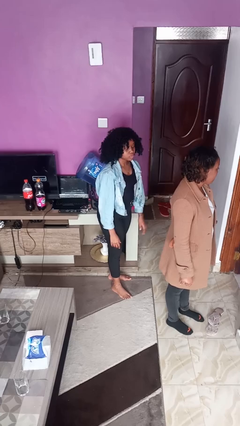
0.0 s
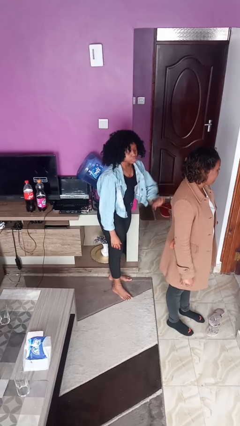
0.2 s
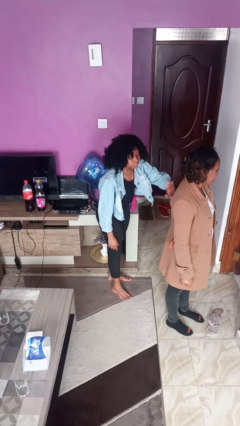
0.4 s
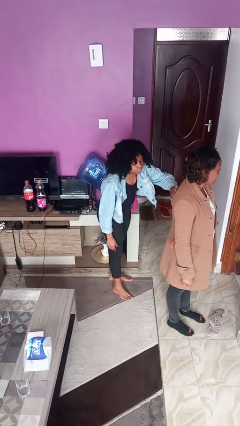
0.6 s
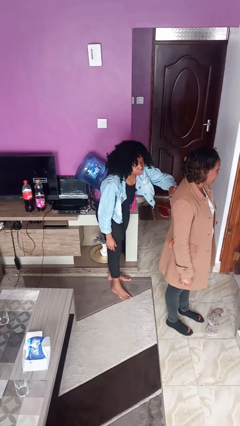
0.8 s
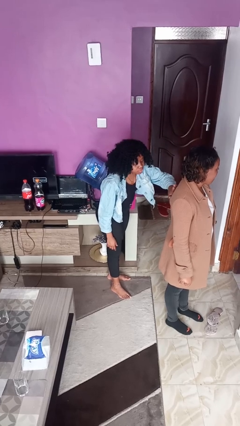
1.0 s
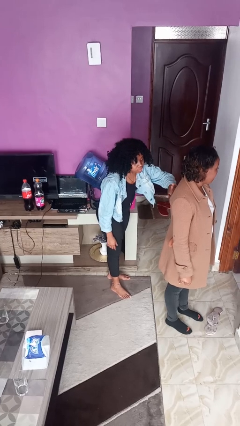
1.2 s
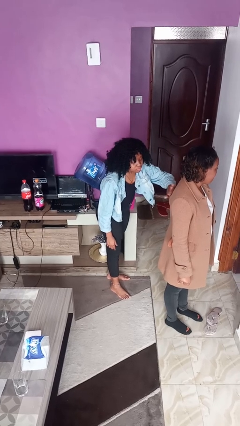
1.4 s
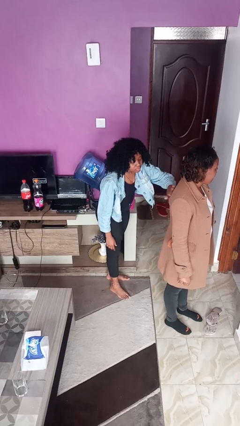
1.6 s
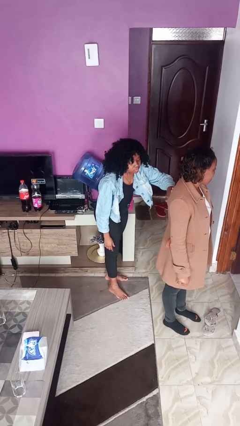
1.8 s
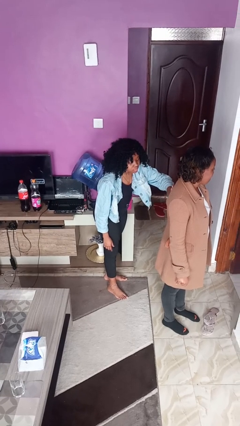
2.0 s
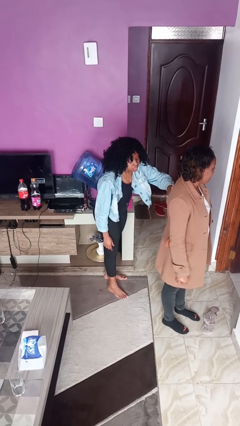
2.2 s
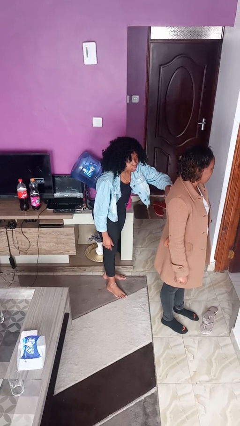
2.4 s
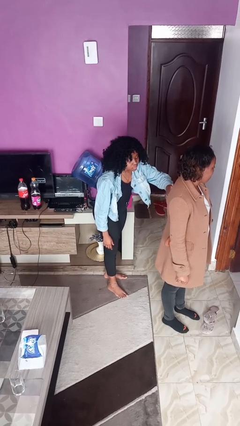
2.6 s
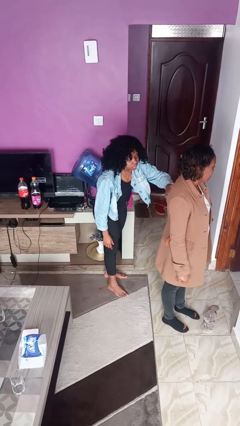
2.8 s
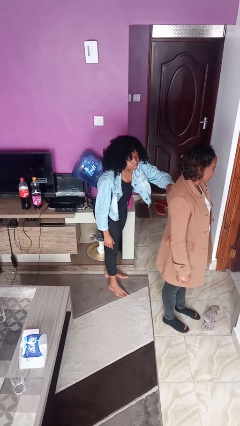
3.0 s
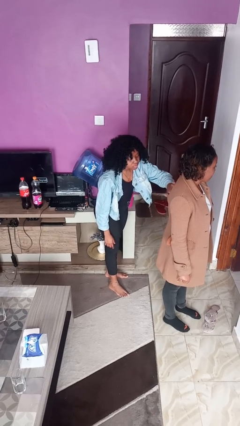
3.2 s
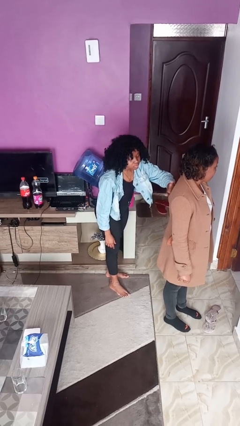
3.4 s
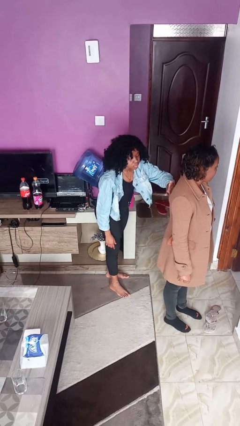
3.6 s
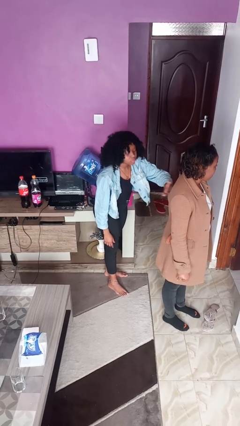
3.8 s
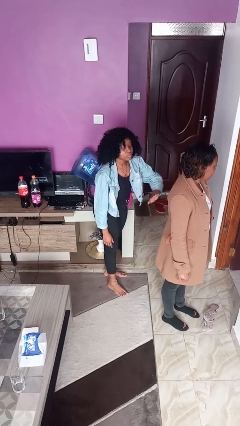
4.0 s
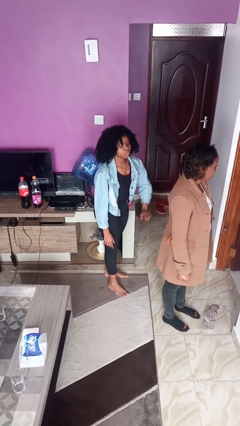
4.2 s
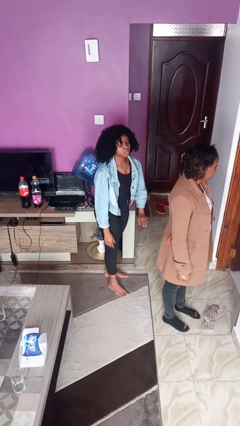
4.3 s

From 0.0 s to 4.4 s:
person touches back of person

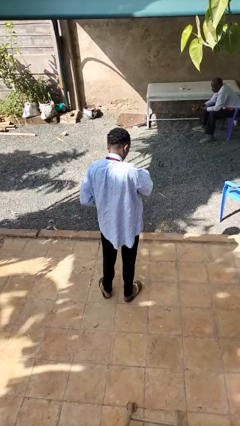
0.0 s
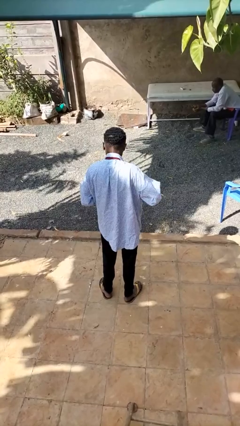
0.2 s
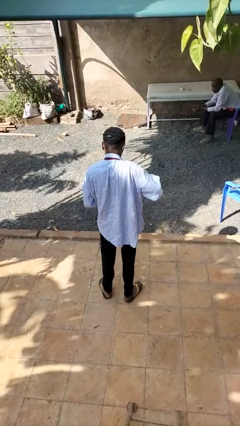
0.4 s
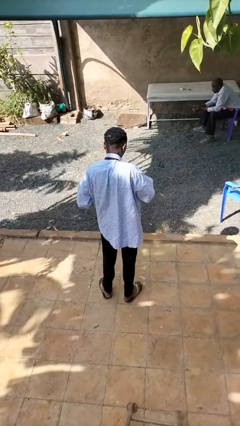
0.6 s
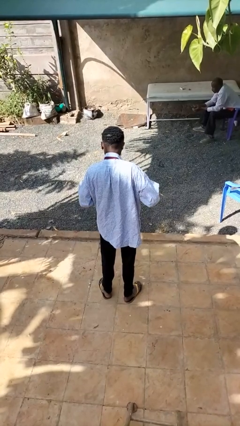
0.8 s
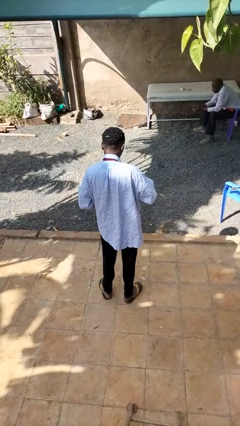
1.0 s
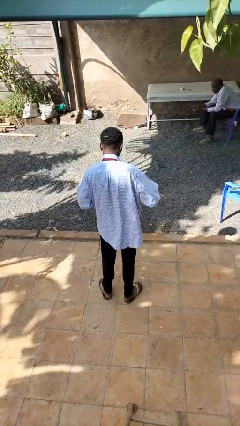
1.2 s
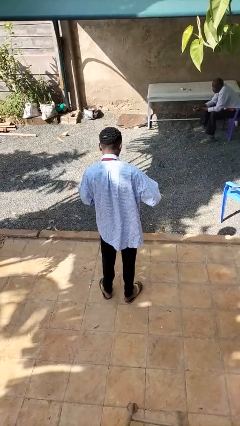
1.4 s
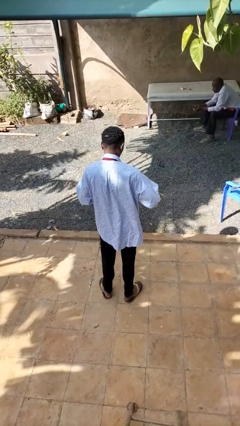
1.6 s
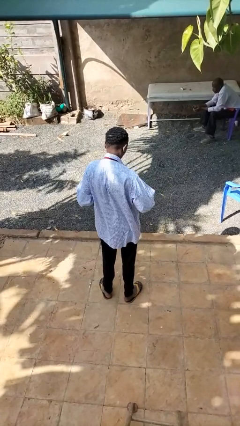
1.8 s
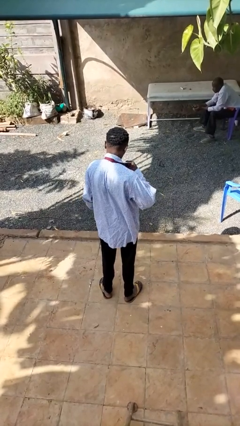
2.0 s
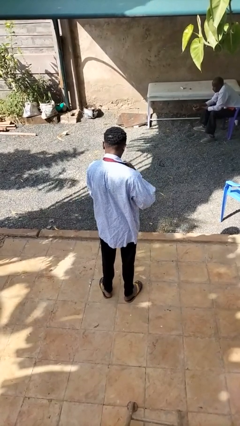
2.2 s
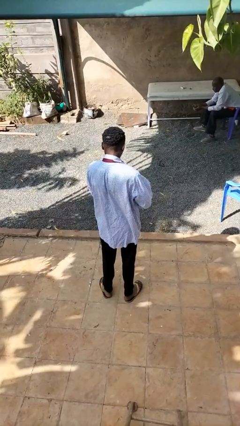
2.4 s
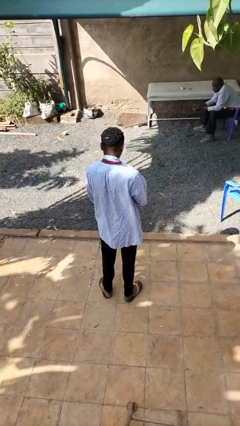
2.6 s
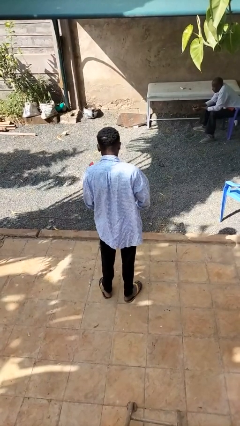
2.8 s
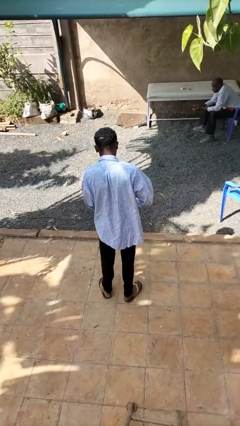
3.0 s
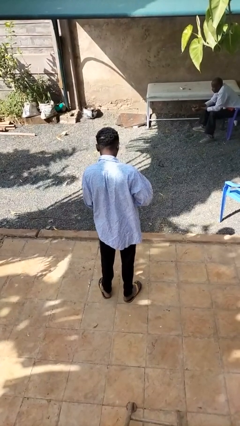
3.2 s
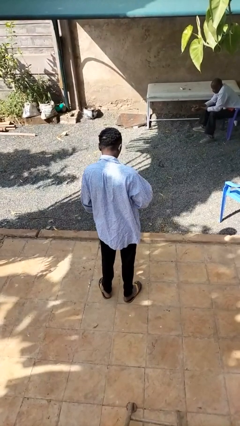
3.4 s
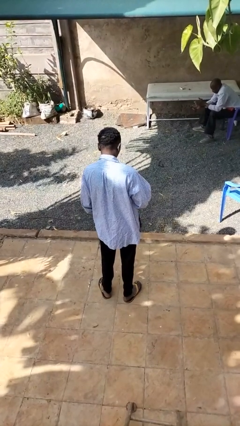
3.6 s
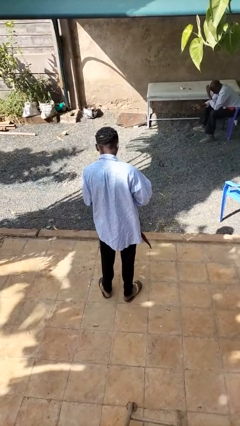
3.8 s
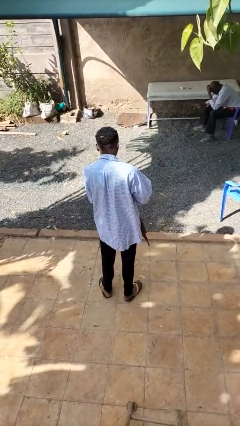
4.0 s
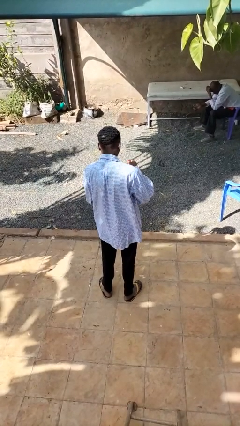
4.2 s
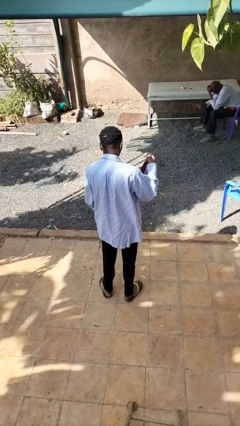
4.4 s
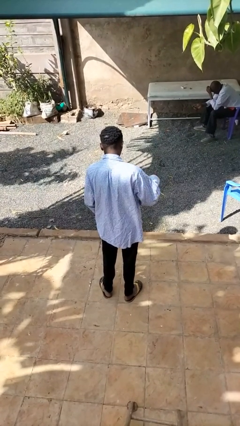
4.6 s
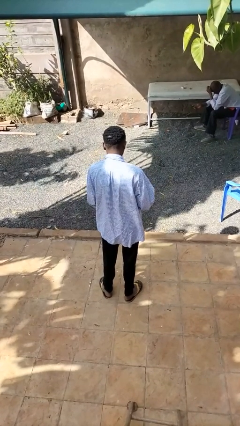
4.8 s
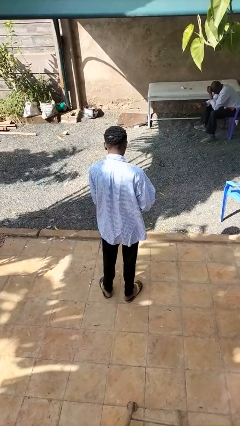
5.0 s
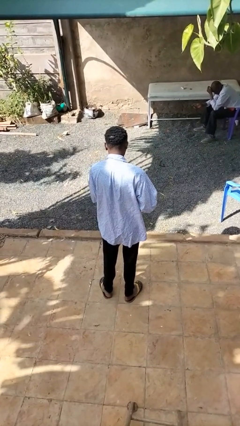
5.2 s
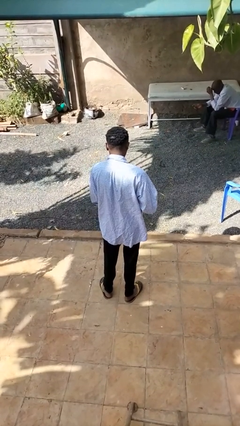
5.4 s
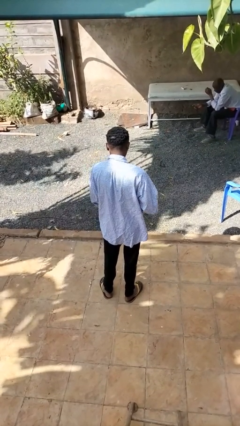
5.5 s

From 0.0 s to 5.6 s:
person takes off necktie

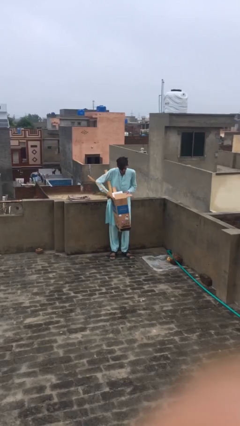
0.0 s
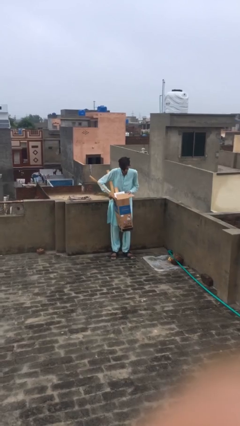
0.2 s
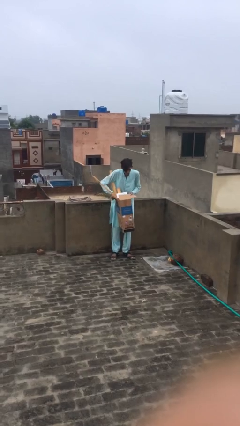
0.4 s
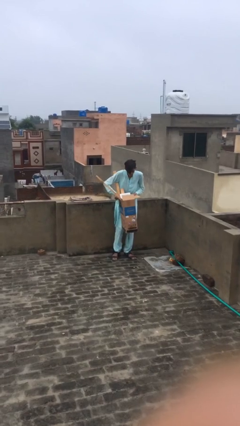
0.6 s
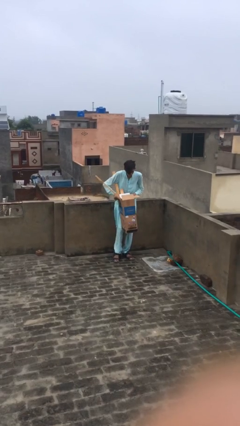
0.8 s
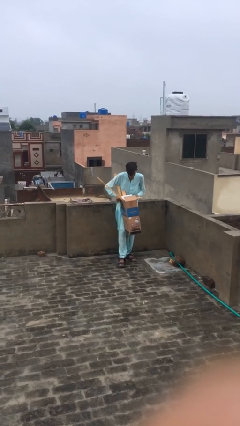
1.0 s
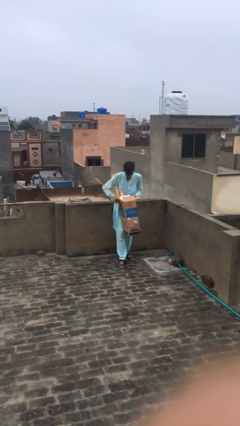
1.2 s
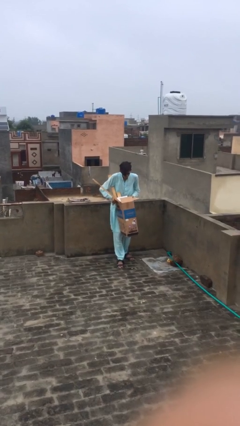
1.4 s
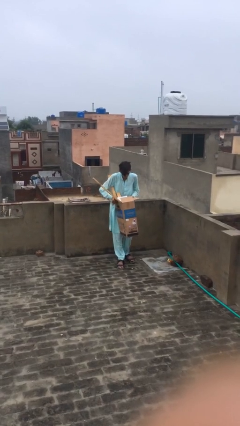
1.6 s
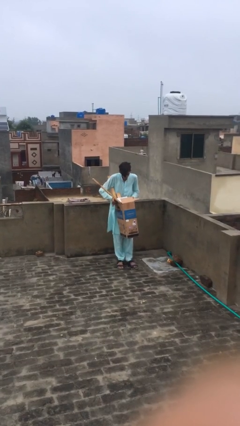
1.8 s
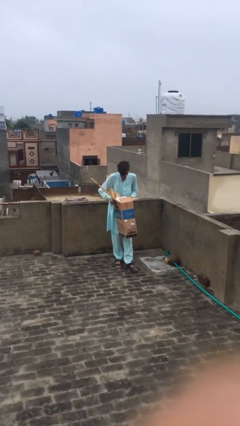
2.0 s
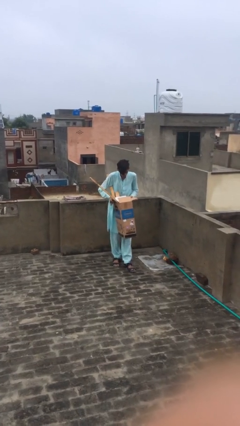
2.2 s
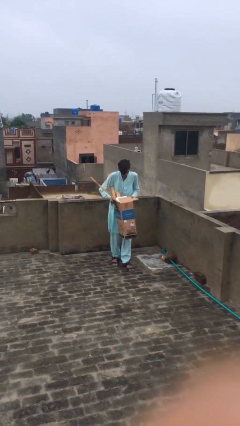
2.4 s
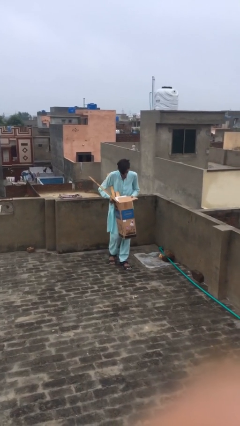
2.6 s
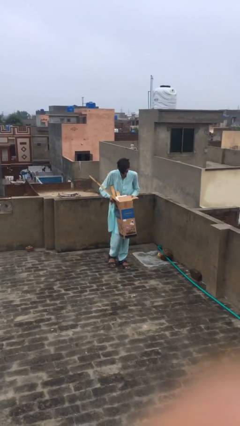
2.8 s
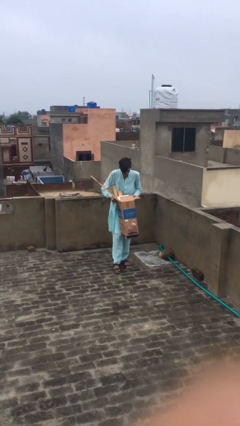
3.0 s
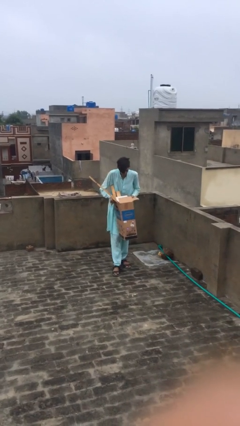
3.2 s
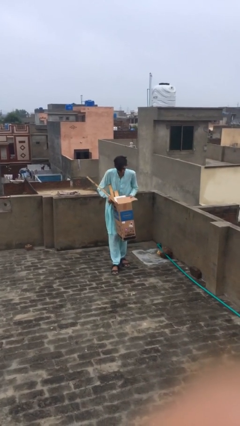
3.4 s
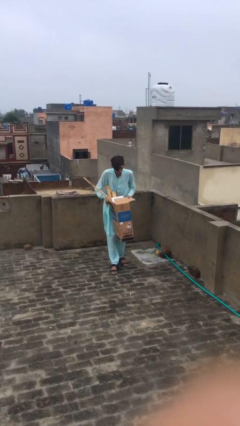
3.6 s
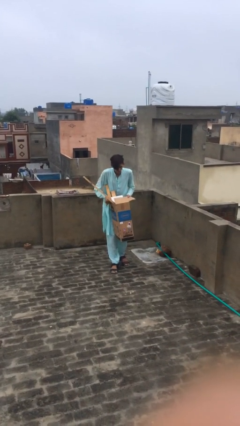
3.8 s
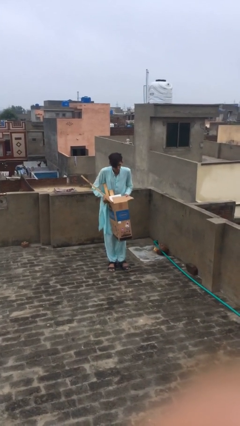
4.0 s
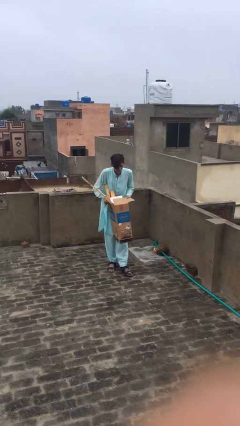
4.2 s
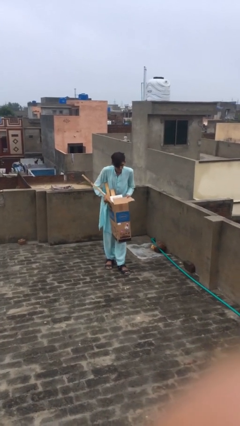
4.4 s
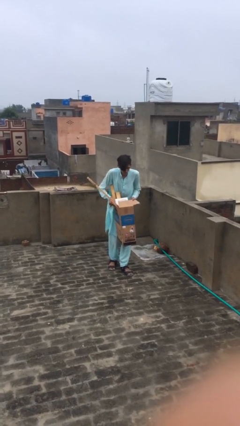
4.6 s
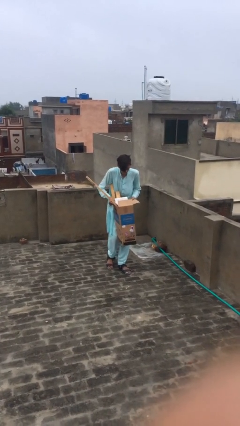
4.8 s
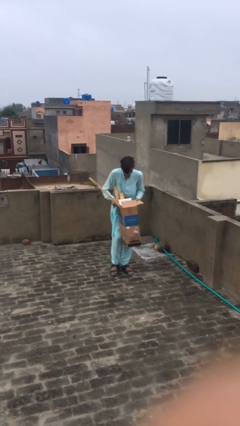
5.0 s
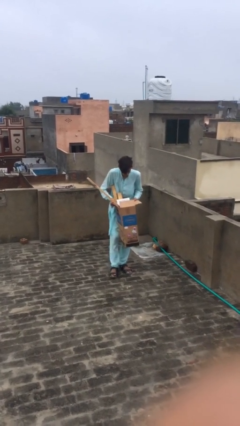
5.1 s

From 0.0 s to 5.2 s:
person carries heavy object

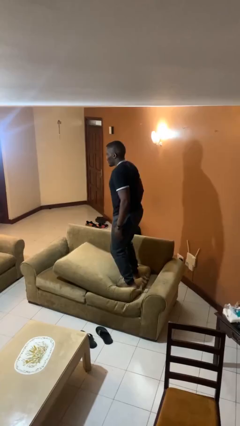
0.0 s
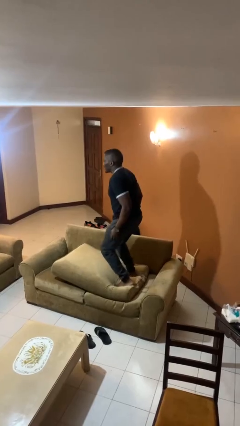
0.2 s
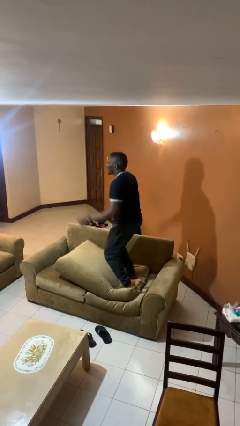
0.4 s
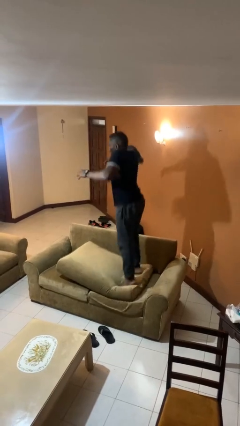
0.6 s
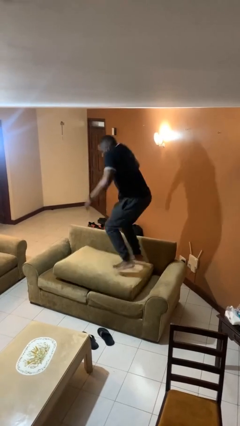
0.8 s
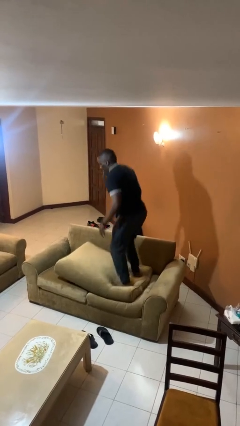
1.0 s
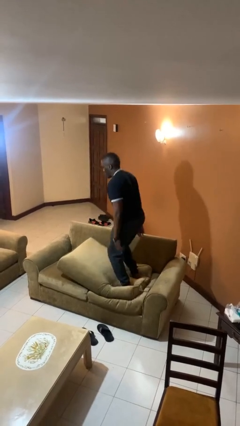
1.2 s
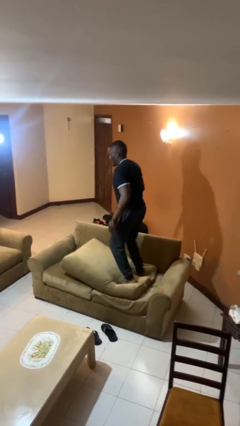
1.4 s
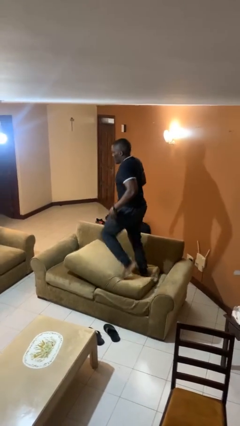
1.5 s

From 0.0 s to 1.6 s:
person jumps on couch

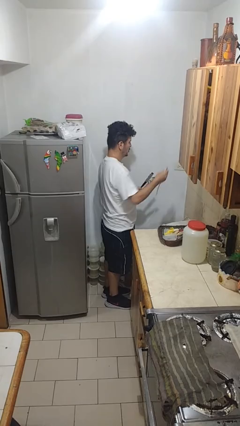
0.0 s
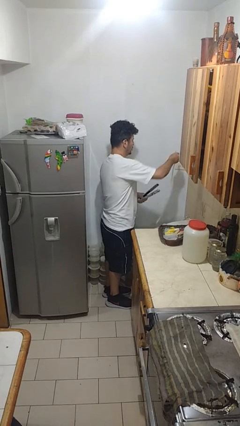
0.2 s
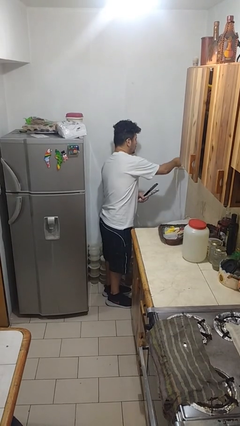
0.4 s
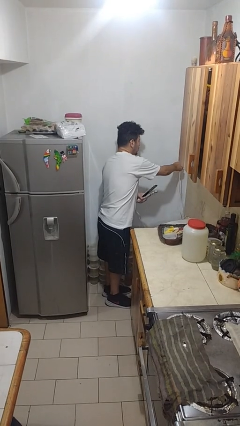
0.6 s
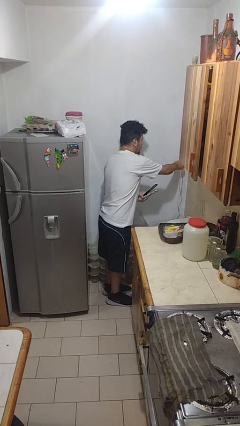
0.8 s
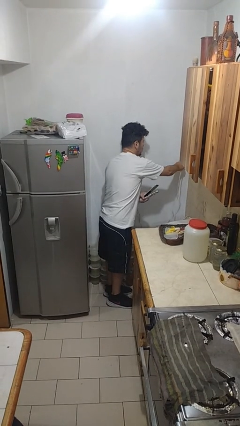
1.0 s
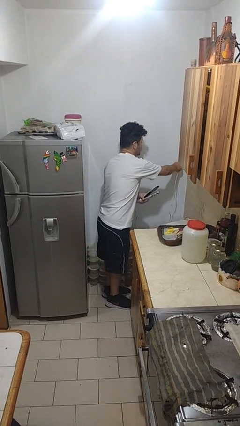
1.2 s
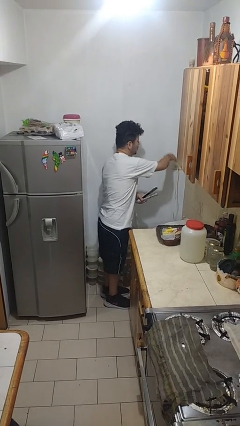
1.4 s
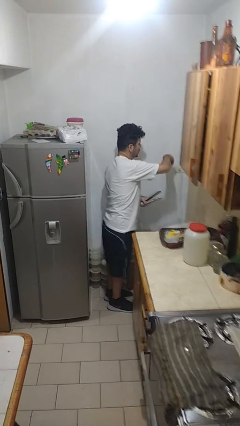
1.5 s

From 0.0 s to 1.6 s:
person plugs into electrical socket
